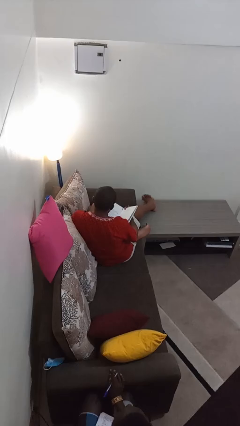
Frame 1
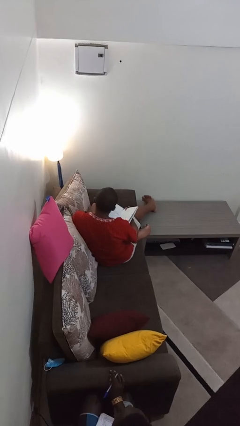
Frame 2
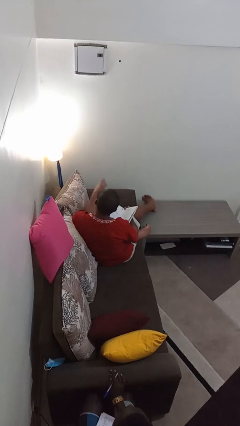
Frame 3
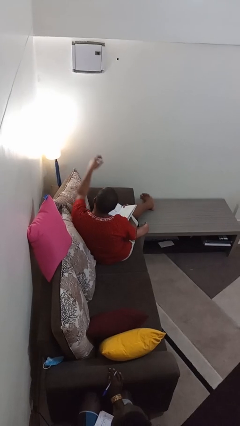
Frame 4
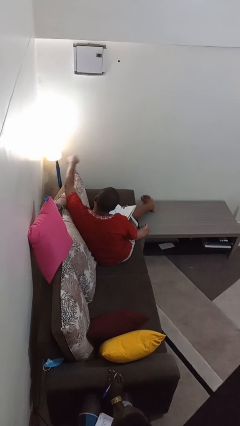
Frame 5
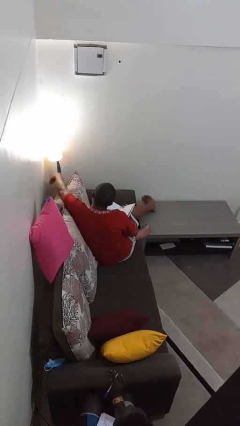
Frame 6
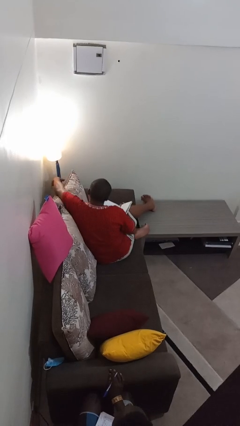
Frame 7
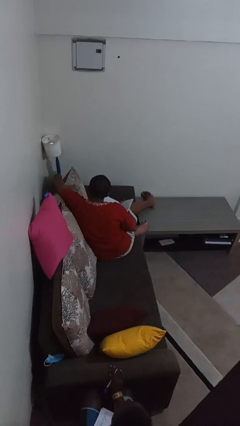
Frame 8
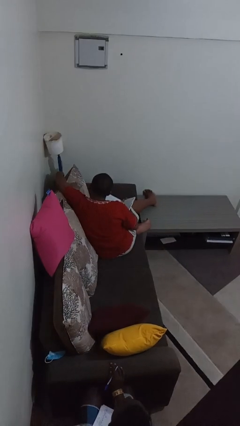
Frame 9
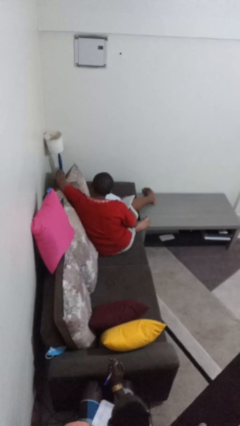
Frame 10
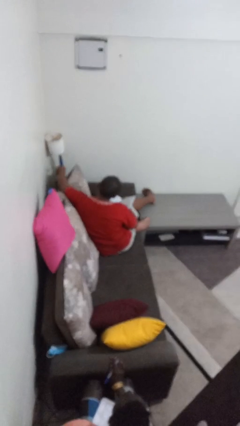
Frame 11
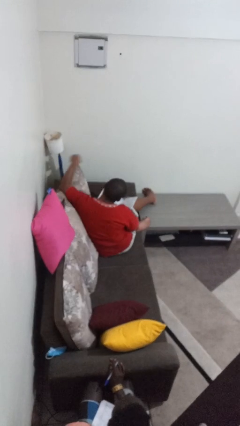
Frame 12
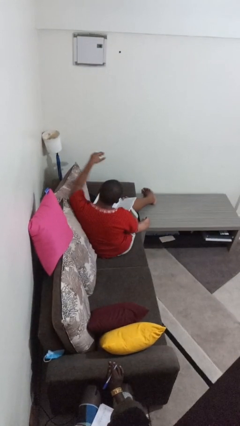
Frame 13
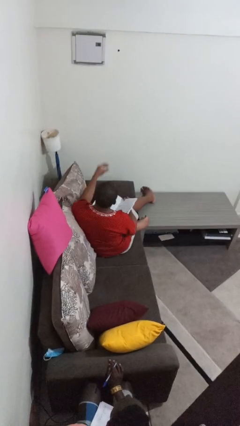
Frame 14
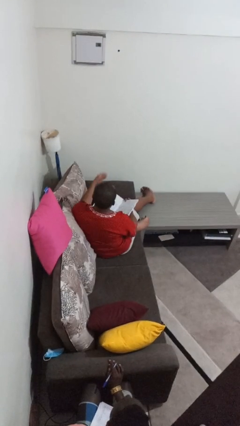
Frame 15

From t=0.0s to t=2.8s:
person turns off lamp

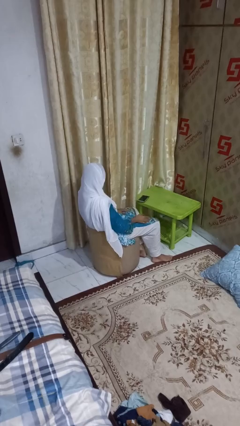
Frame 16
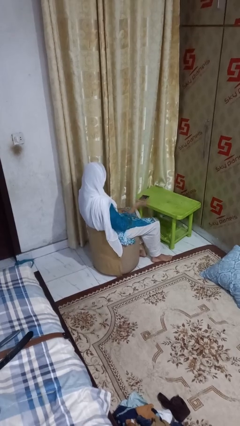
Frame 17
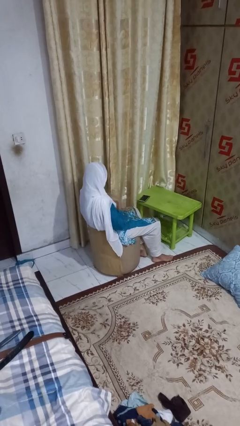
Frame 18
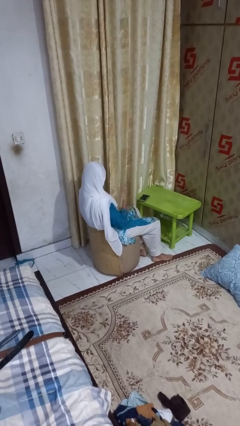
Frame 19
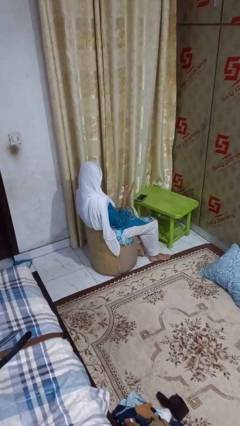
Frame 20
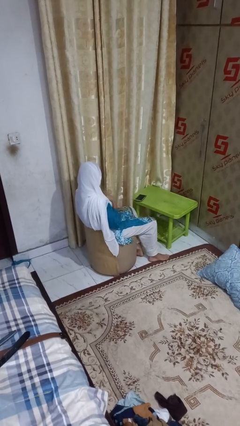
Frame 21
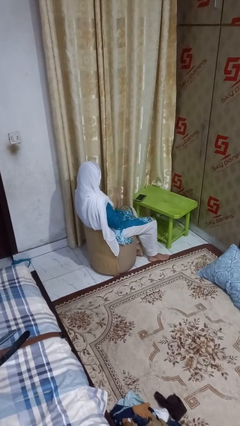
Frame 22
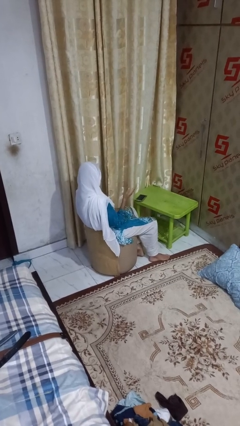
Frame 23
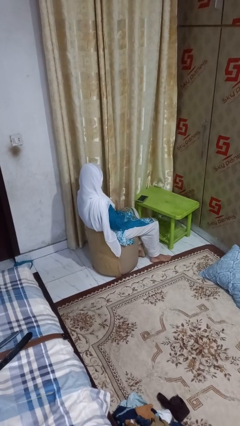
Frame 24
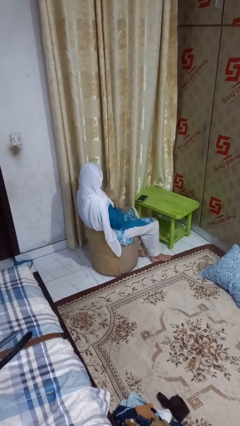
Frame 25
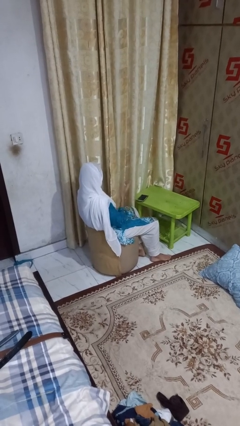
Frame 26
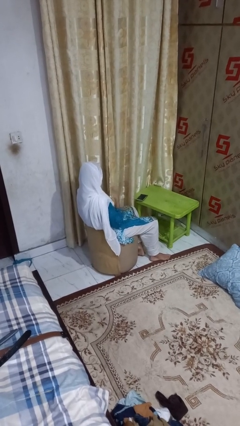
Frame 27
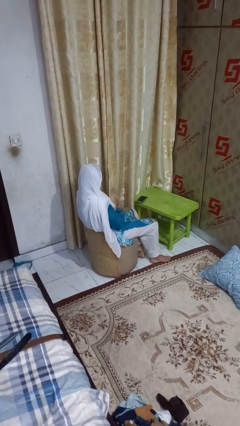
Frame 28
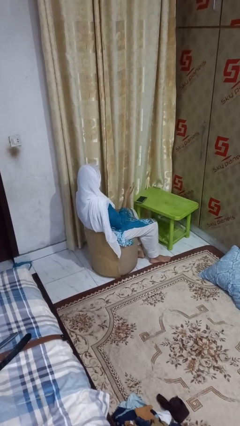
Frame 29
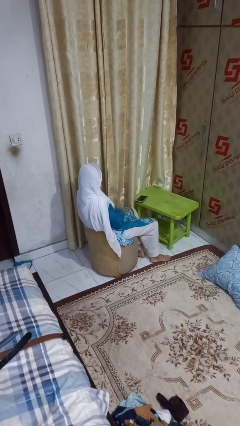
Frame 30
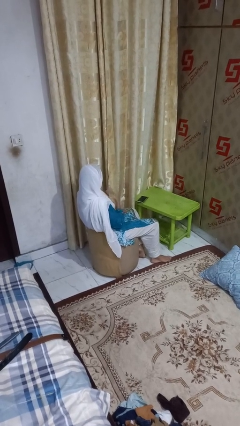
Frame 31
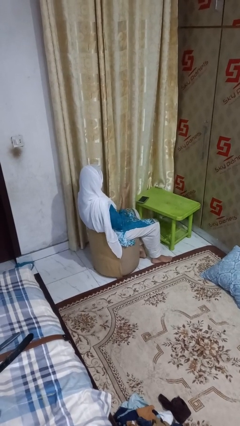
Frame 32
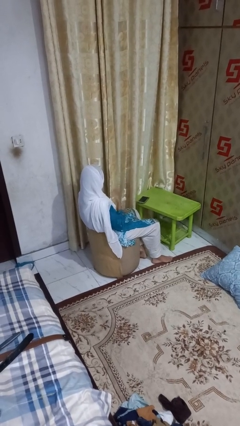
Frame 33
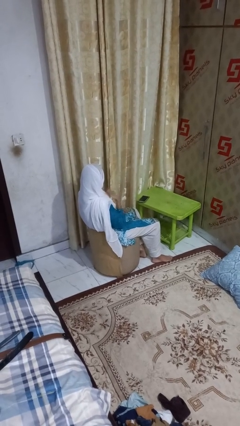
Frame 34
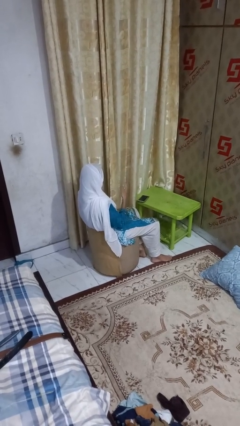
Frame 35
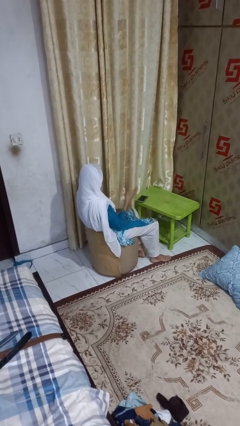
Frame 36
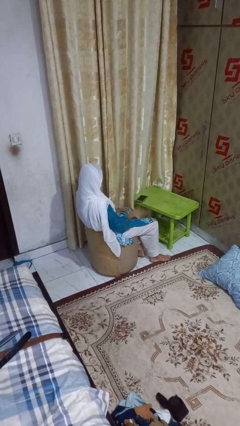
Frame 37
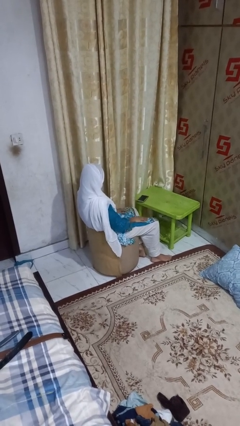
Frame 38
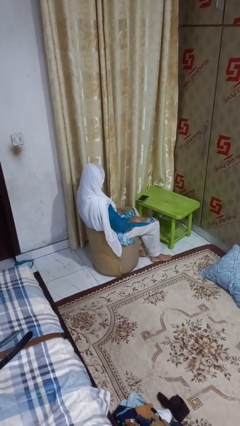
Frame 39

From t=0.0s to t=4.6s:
person drums on chest

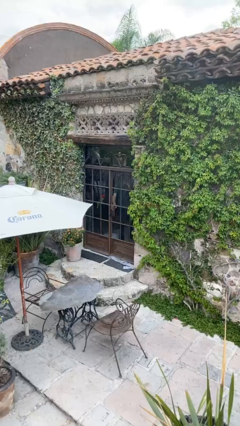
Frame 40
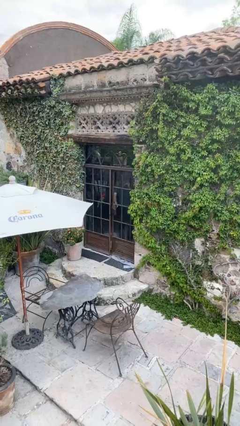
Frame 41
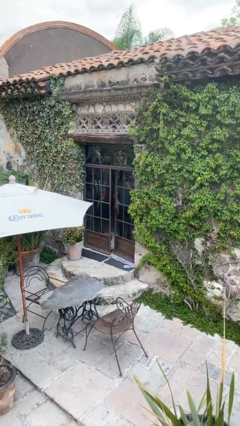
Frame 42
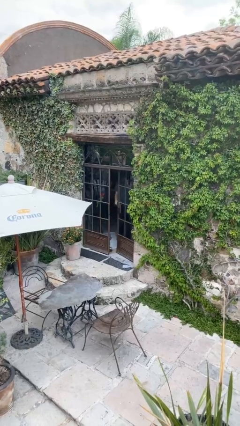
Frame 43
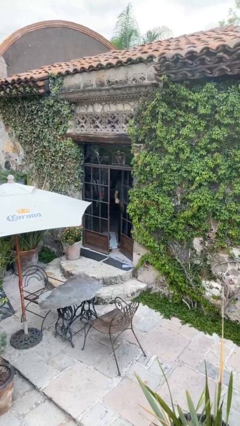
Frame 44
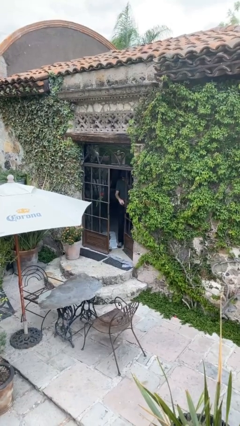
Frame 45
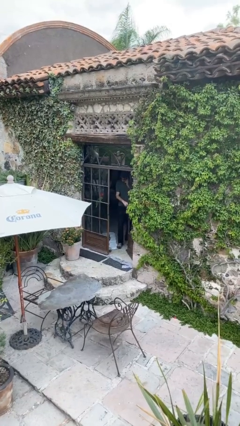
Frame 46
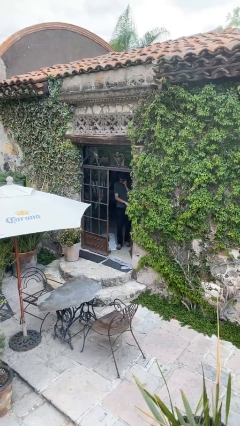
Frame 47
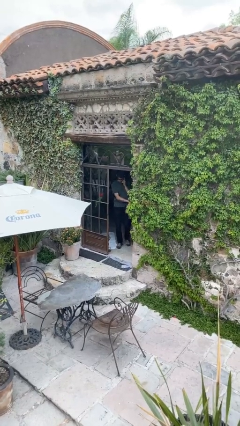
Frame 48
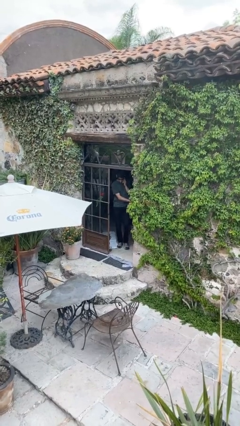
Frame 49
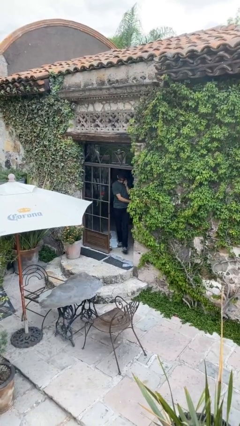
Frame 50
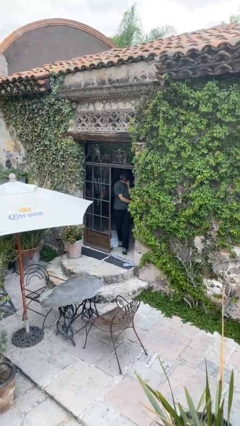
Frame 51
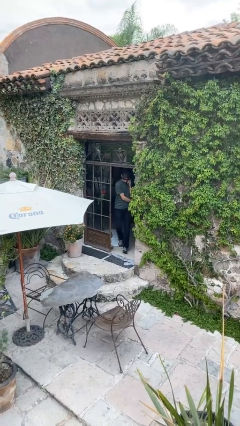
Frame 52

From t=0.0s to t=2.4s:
person opens facility door

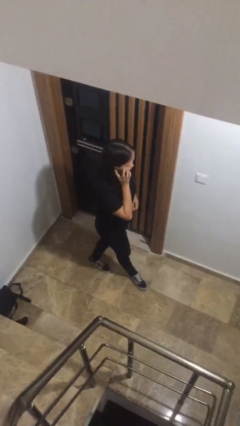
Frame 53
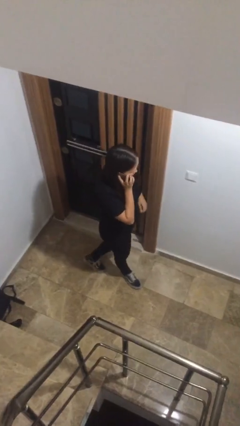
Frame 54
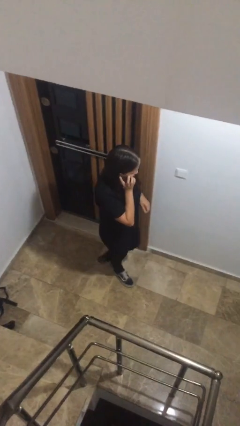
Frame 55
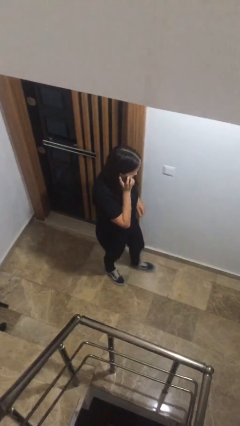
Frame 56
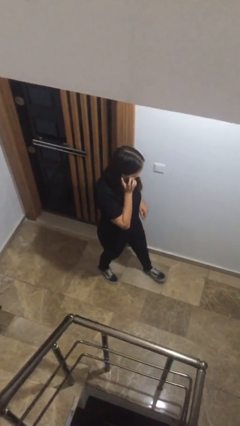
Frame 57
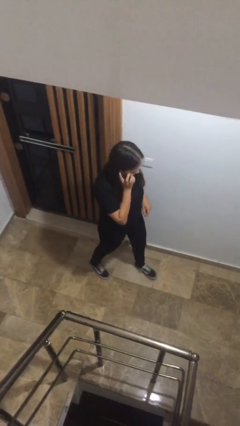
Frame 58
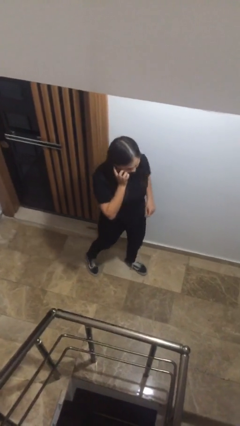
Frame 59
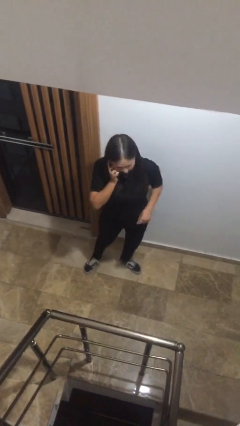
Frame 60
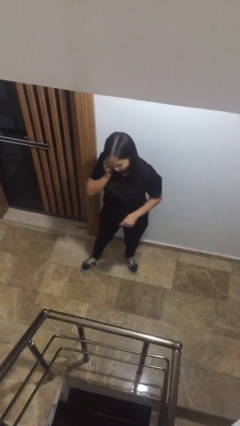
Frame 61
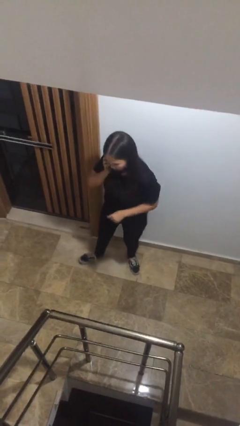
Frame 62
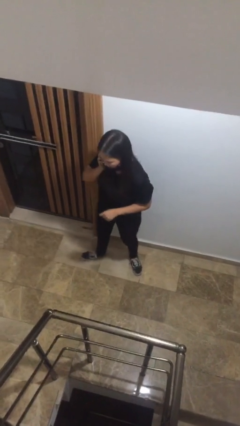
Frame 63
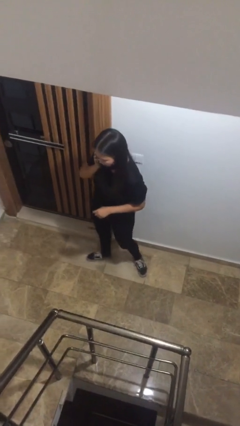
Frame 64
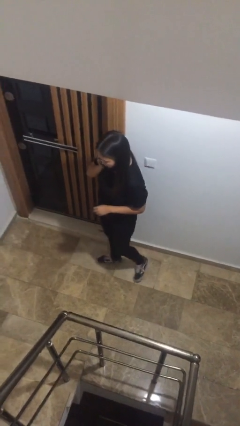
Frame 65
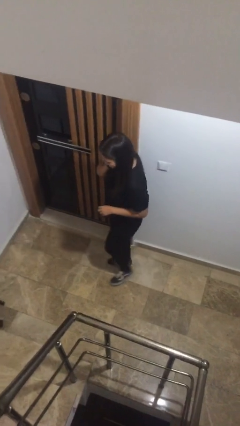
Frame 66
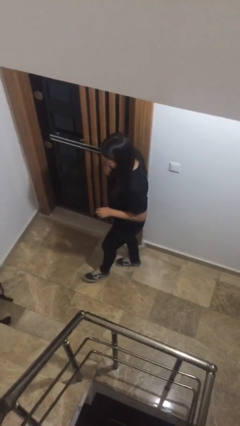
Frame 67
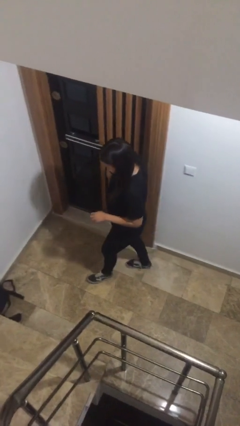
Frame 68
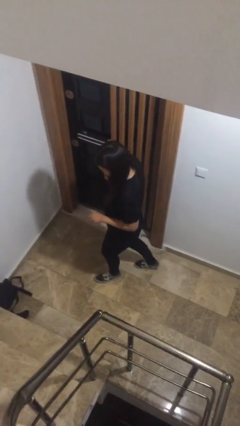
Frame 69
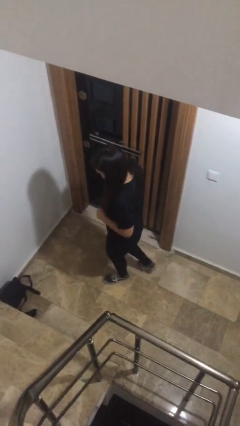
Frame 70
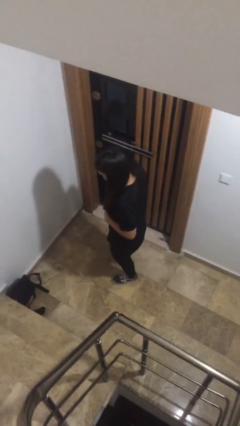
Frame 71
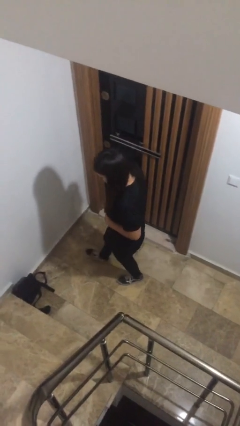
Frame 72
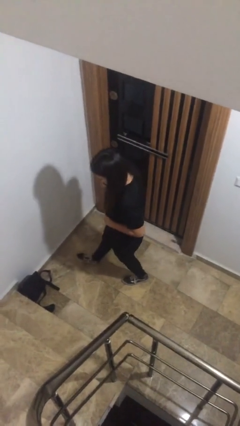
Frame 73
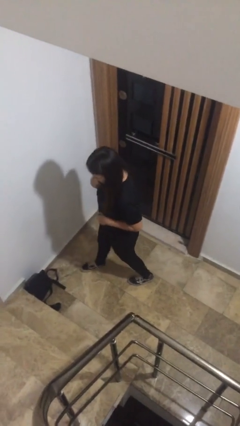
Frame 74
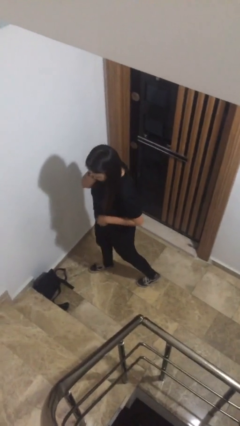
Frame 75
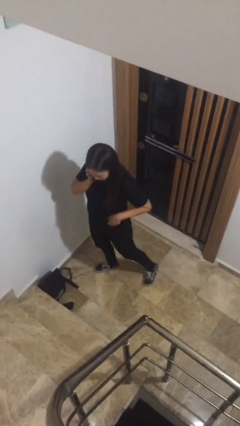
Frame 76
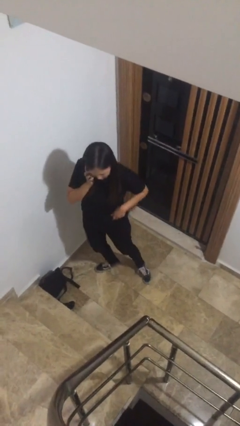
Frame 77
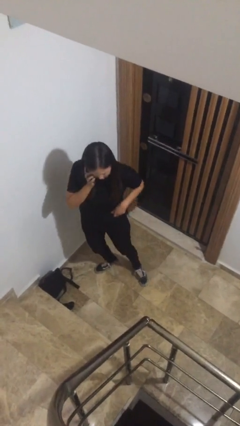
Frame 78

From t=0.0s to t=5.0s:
person talks on phone

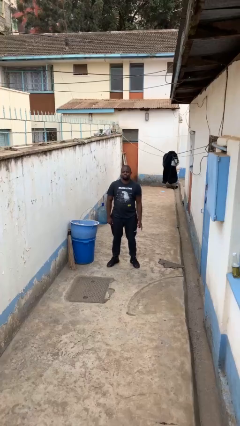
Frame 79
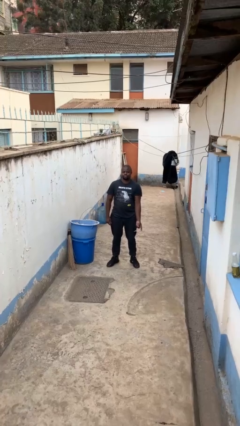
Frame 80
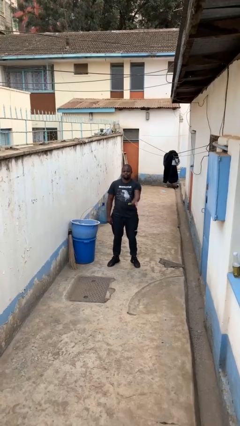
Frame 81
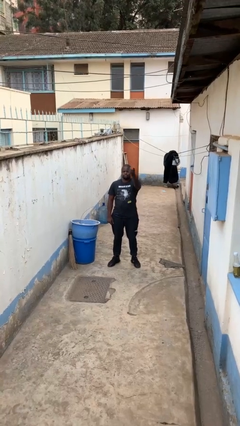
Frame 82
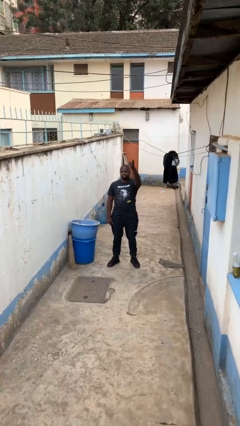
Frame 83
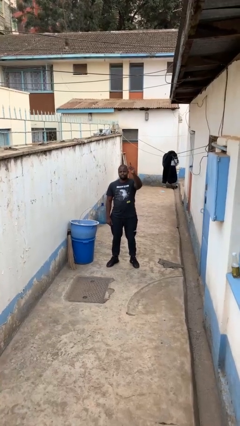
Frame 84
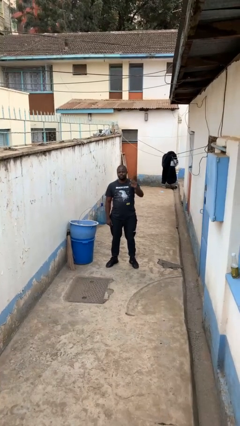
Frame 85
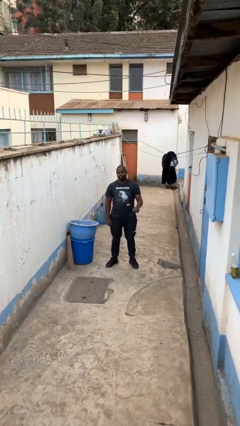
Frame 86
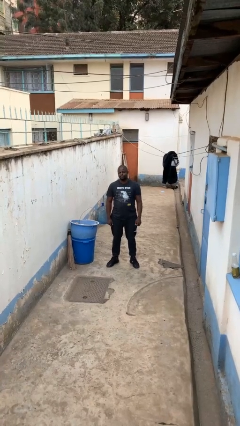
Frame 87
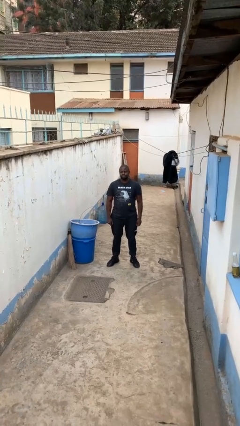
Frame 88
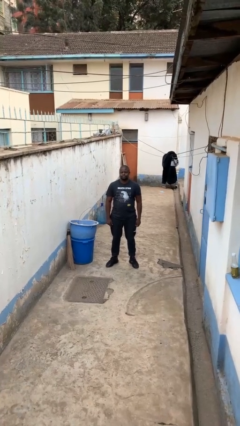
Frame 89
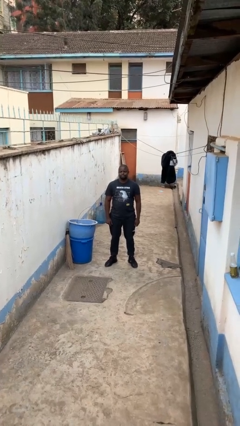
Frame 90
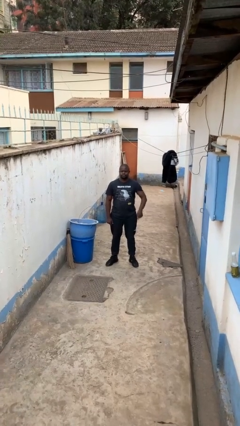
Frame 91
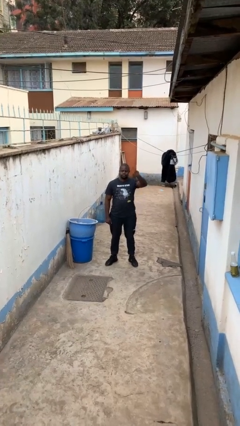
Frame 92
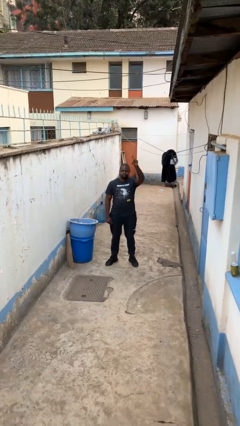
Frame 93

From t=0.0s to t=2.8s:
person gestures swipe up
